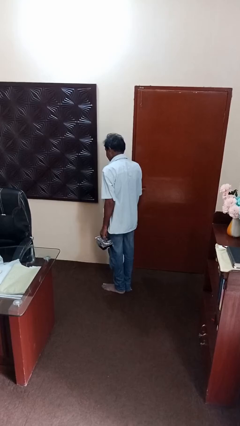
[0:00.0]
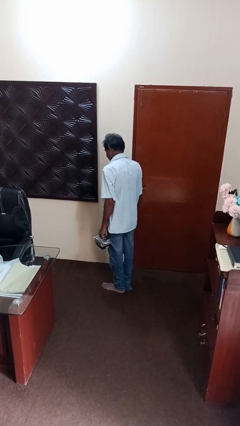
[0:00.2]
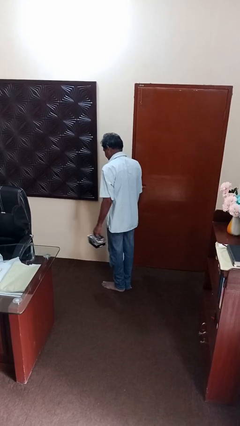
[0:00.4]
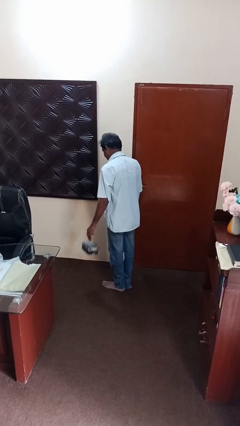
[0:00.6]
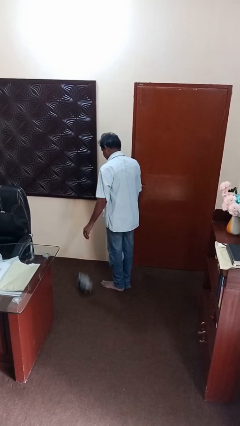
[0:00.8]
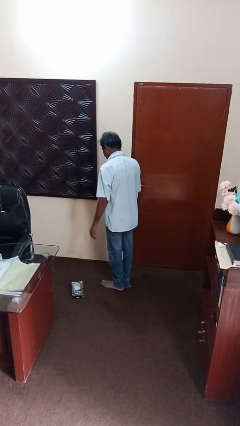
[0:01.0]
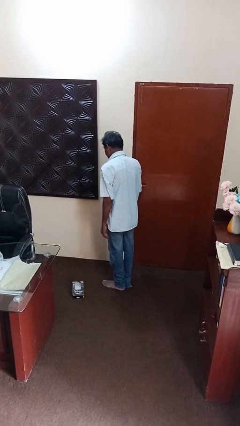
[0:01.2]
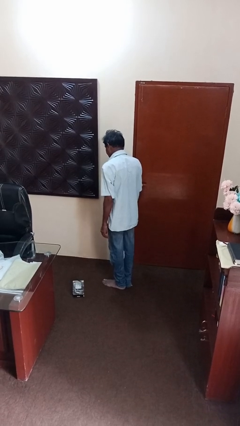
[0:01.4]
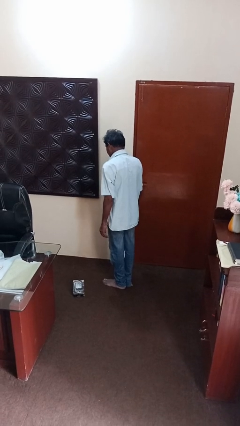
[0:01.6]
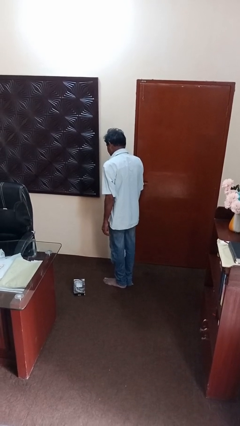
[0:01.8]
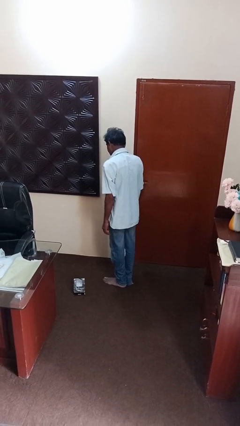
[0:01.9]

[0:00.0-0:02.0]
person throws object to ground

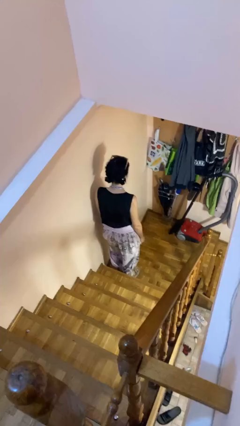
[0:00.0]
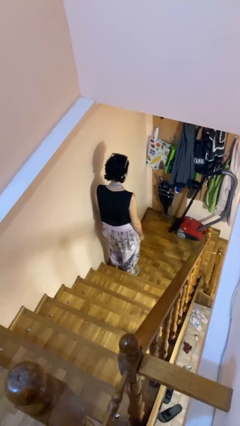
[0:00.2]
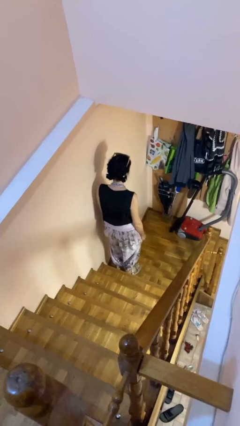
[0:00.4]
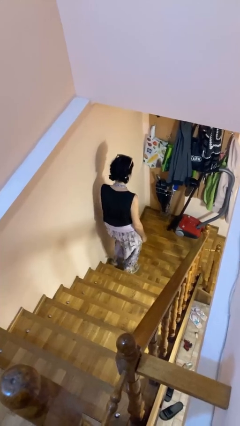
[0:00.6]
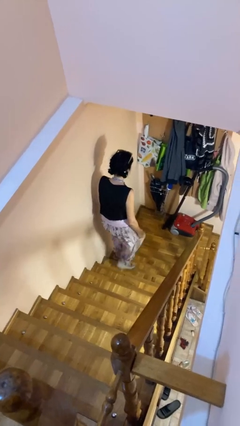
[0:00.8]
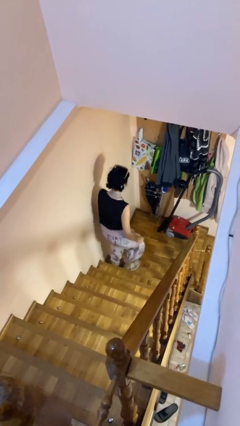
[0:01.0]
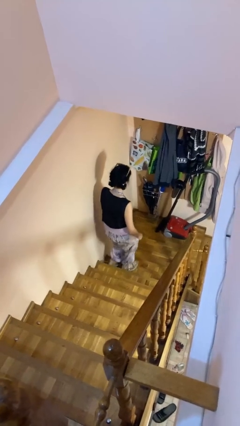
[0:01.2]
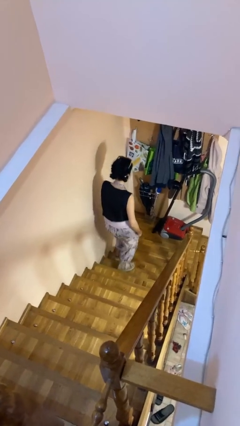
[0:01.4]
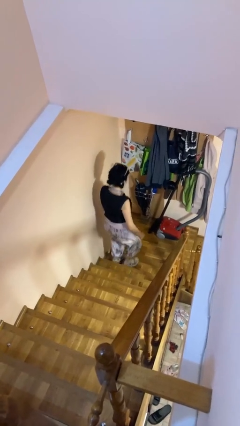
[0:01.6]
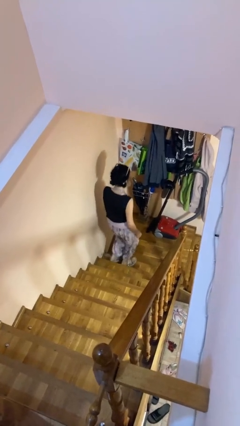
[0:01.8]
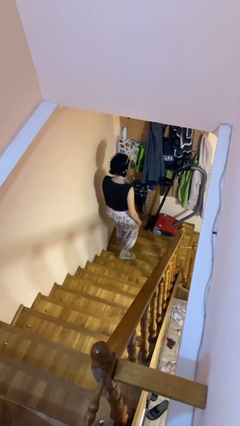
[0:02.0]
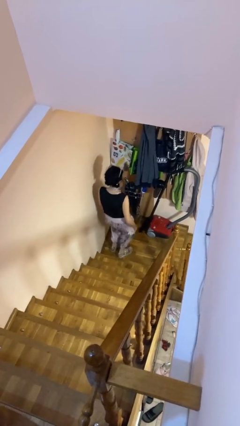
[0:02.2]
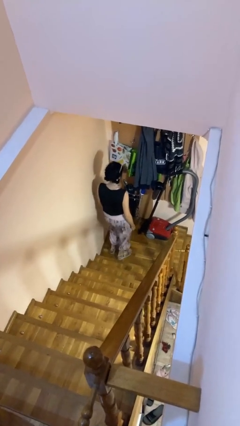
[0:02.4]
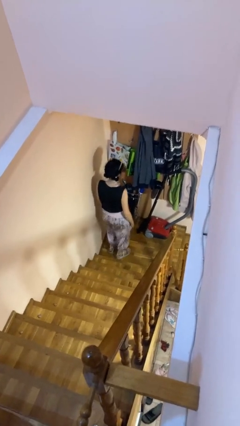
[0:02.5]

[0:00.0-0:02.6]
person climbs down stairs

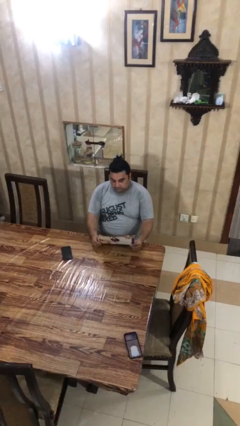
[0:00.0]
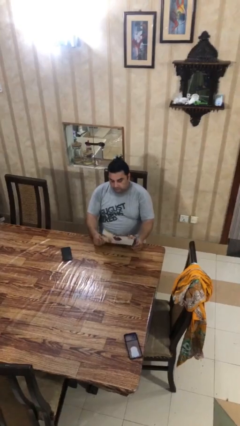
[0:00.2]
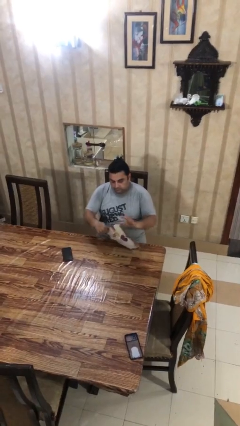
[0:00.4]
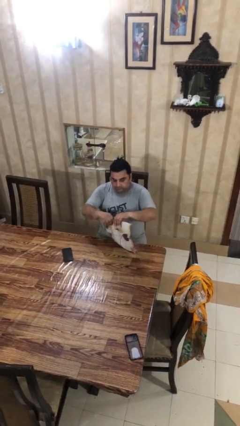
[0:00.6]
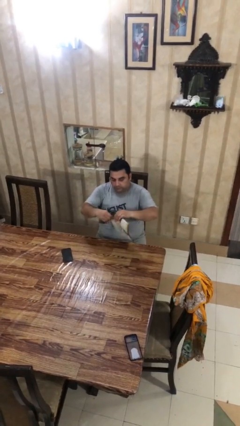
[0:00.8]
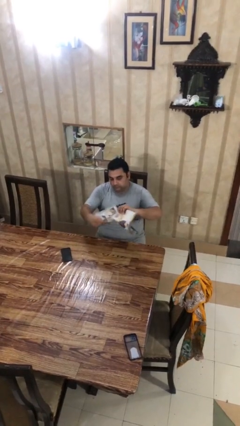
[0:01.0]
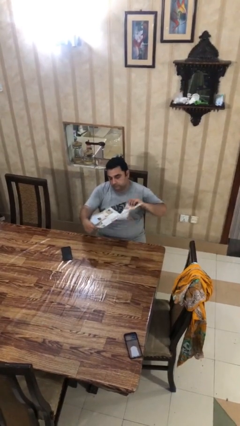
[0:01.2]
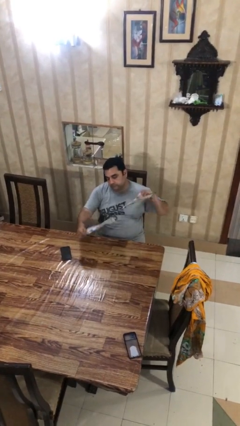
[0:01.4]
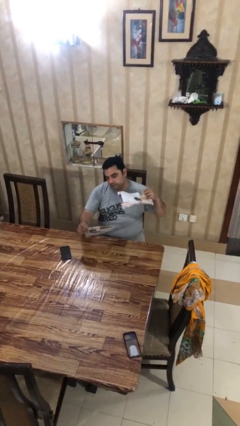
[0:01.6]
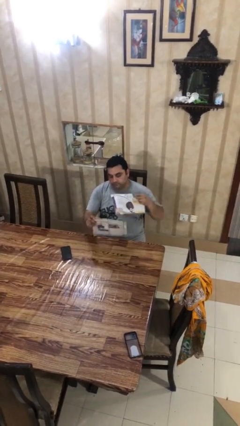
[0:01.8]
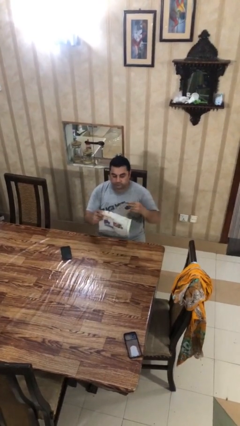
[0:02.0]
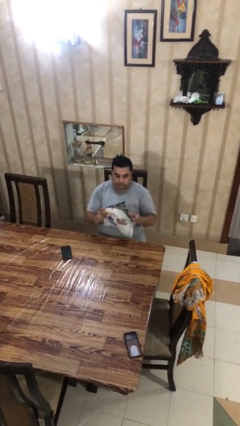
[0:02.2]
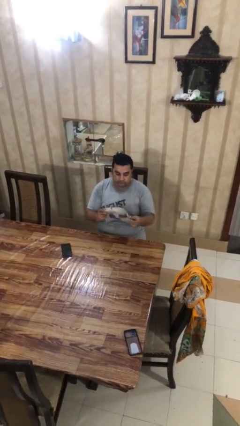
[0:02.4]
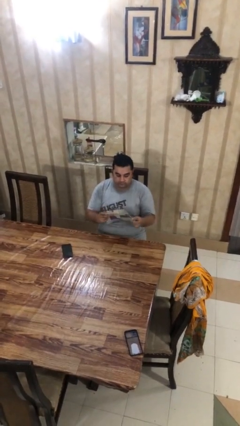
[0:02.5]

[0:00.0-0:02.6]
person tears paper

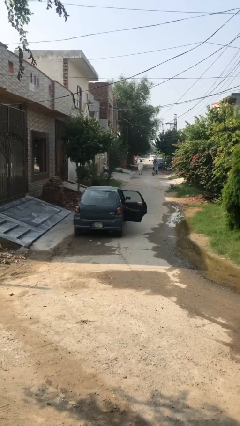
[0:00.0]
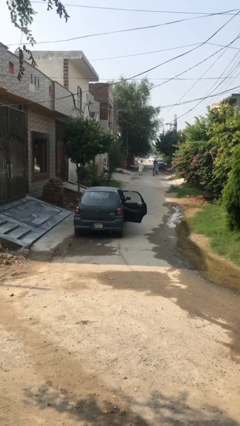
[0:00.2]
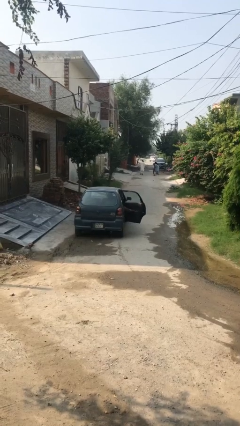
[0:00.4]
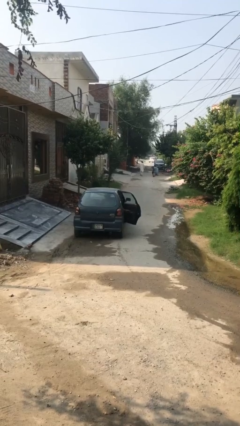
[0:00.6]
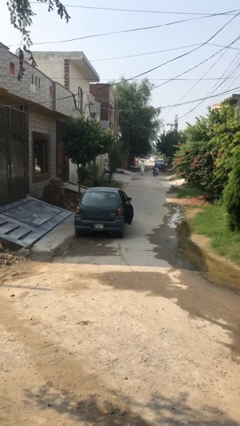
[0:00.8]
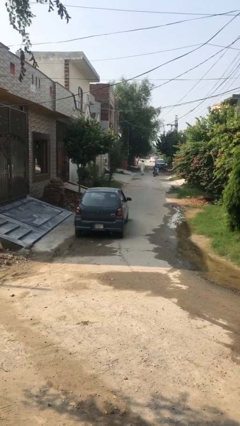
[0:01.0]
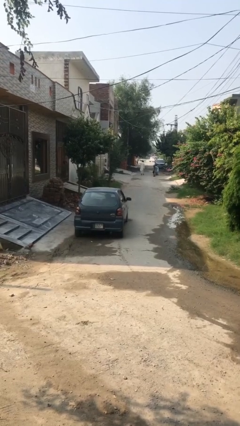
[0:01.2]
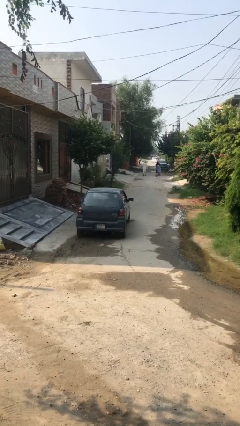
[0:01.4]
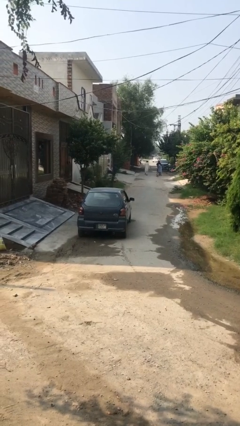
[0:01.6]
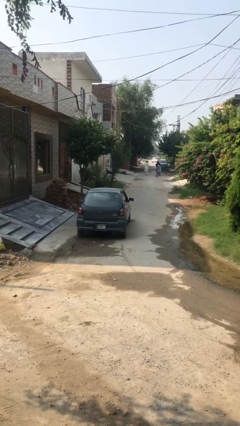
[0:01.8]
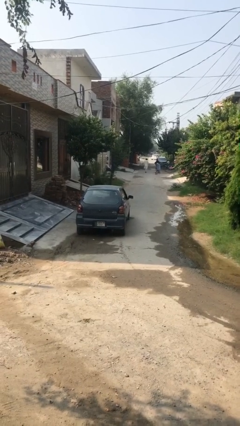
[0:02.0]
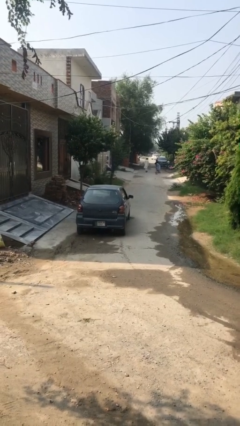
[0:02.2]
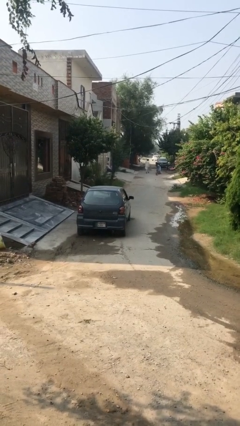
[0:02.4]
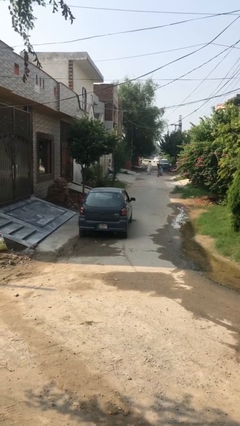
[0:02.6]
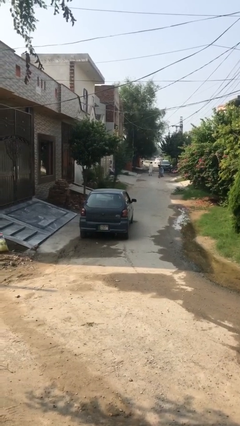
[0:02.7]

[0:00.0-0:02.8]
person closes car door

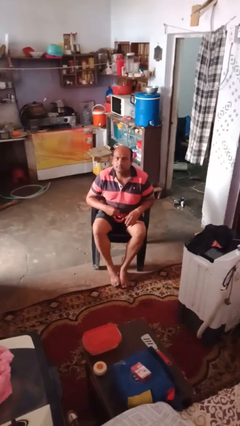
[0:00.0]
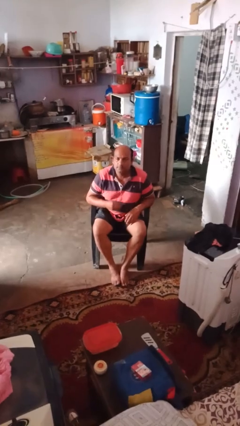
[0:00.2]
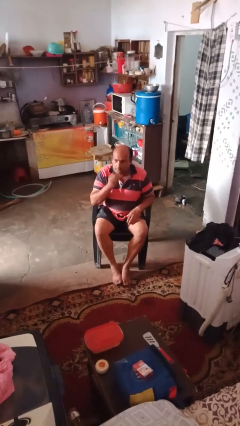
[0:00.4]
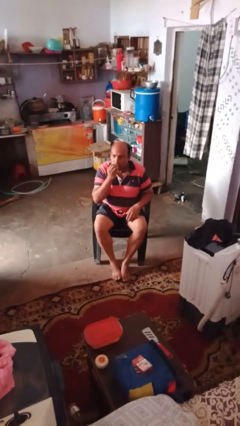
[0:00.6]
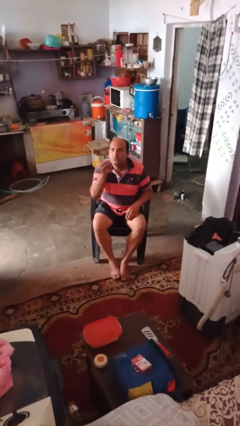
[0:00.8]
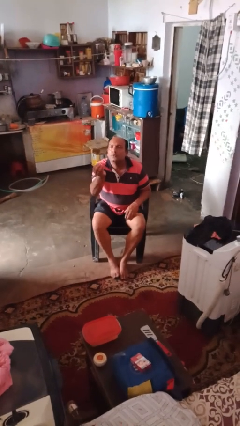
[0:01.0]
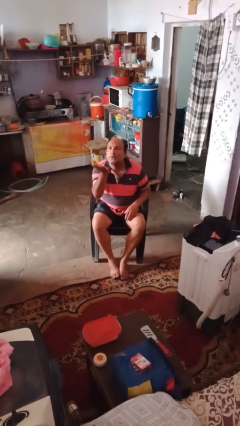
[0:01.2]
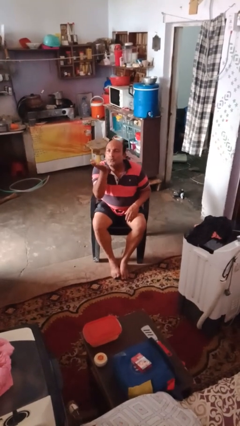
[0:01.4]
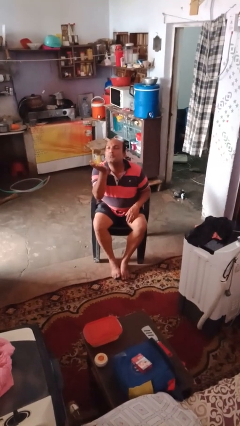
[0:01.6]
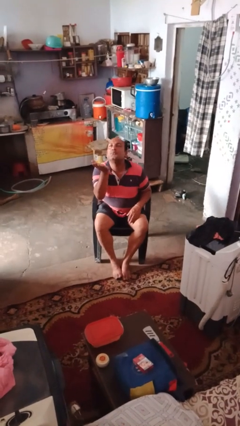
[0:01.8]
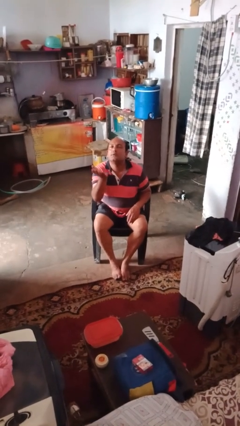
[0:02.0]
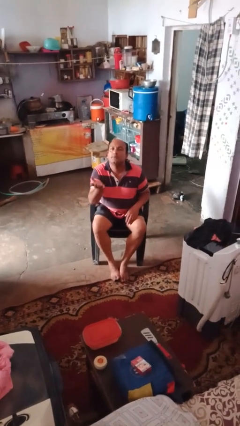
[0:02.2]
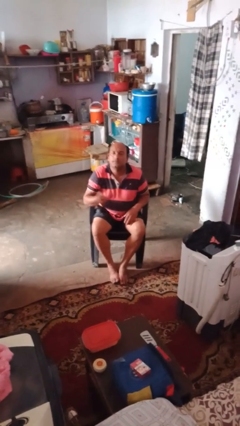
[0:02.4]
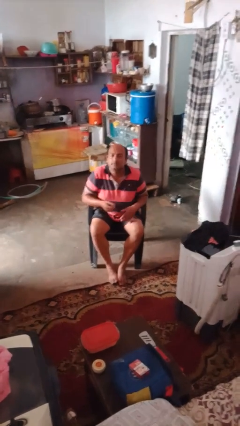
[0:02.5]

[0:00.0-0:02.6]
person gestures blow kiss

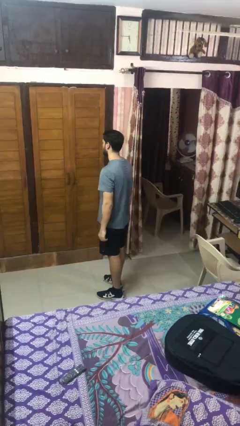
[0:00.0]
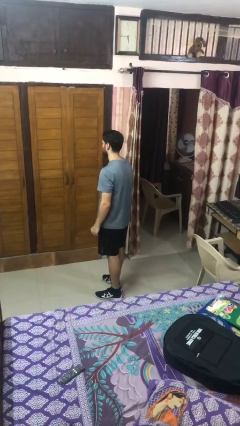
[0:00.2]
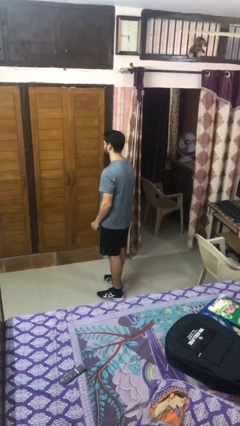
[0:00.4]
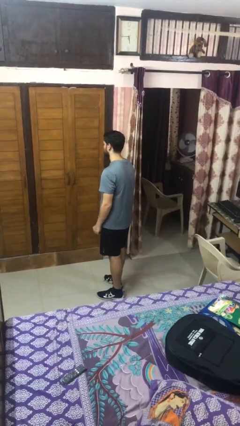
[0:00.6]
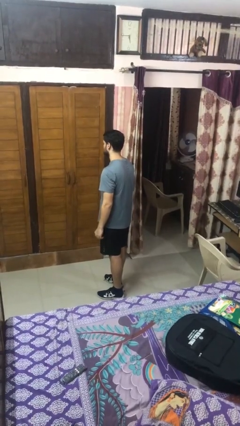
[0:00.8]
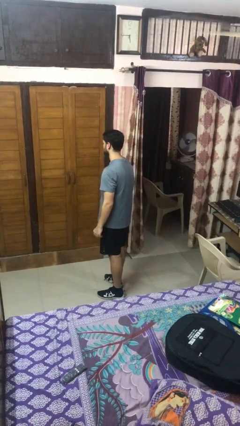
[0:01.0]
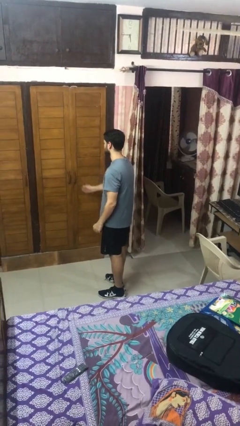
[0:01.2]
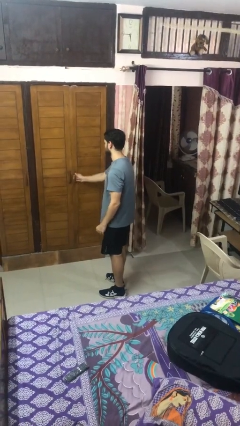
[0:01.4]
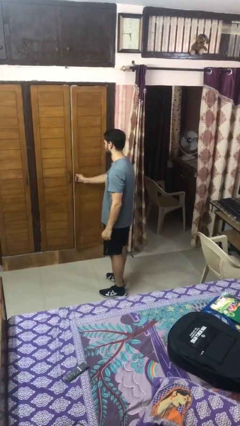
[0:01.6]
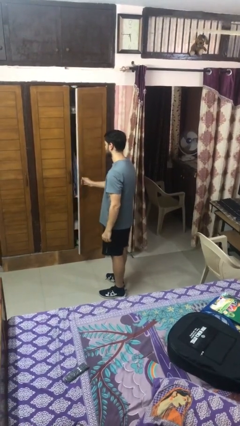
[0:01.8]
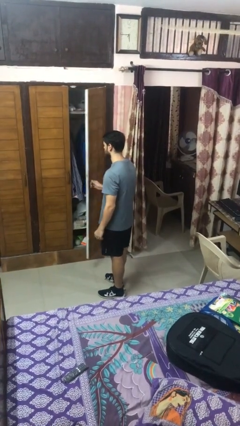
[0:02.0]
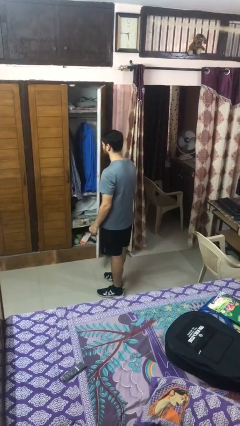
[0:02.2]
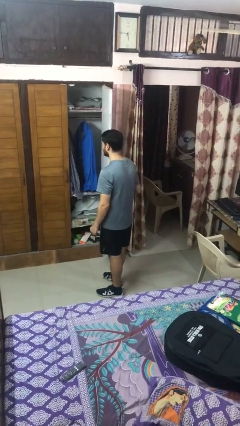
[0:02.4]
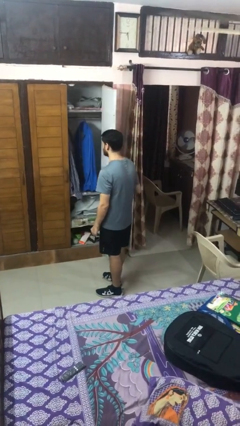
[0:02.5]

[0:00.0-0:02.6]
person opens closet door

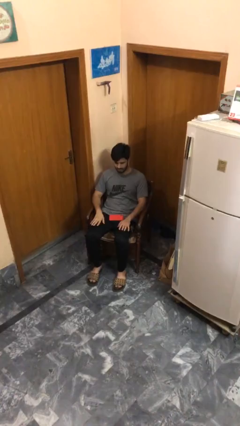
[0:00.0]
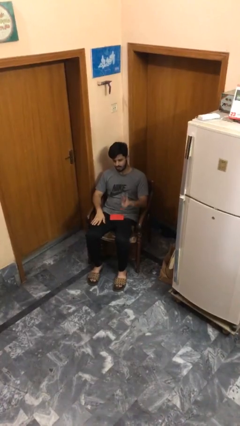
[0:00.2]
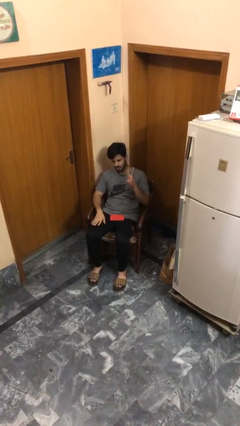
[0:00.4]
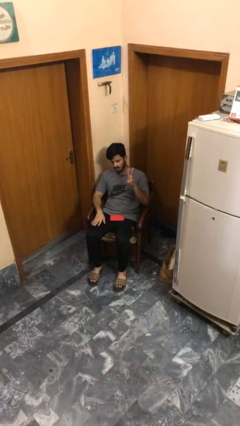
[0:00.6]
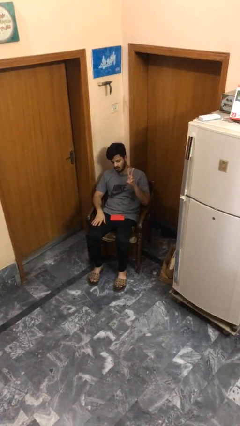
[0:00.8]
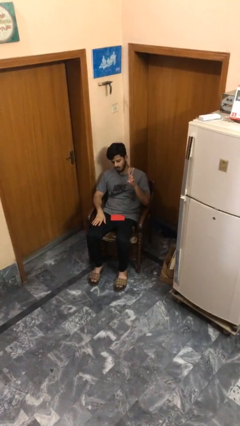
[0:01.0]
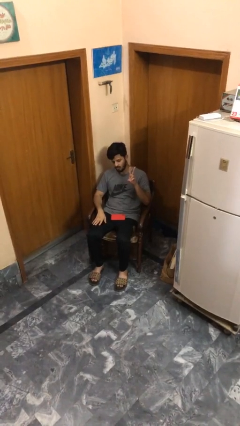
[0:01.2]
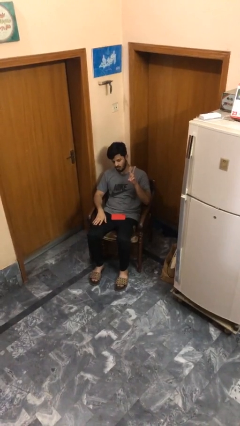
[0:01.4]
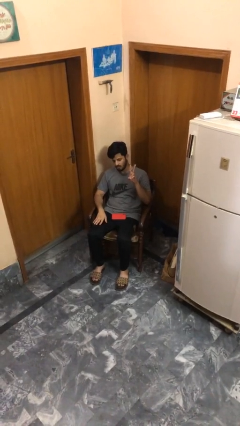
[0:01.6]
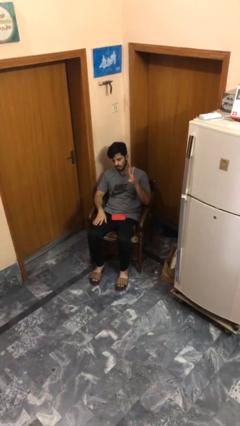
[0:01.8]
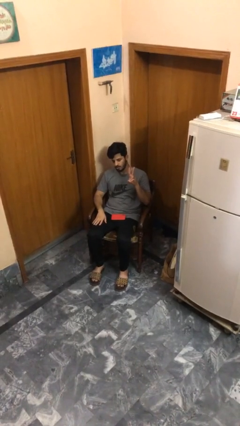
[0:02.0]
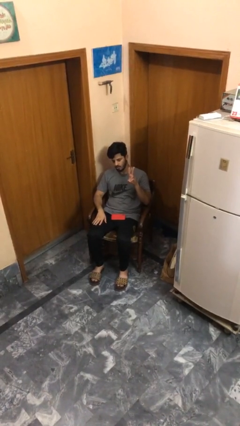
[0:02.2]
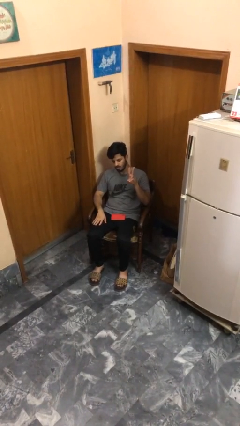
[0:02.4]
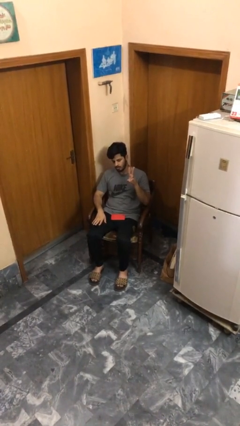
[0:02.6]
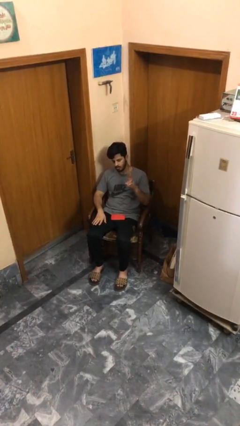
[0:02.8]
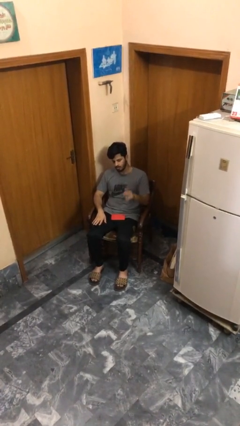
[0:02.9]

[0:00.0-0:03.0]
person gestures peace
